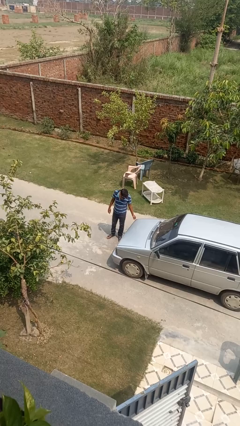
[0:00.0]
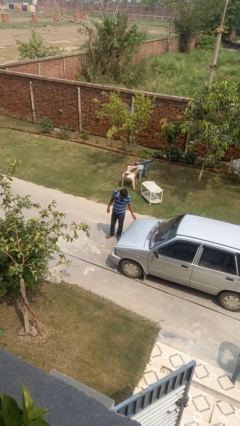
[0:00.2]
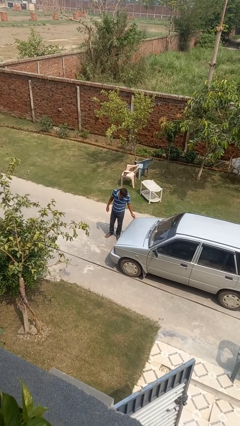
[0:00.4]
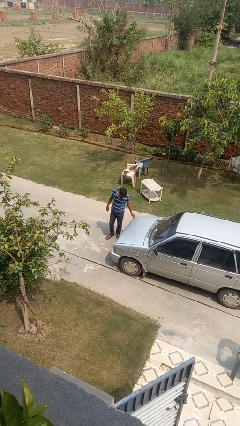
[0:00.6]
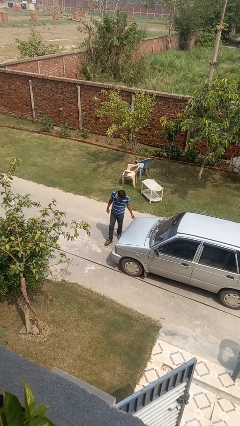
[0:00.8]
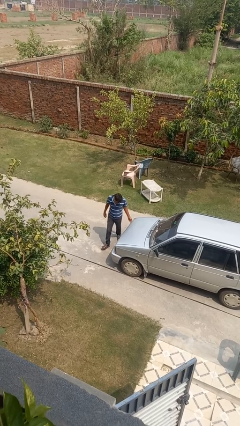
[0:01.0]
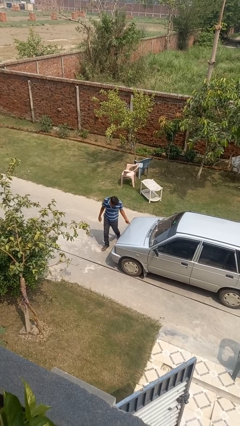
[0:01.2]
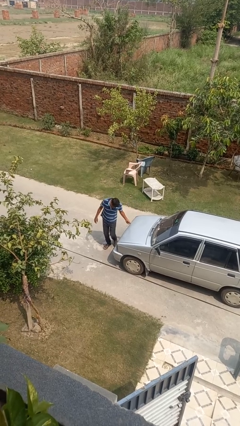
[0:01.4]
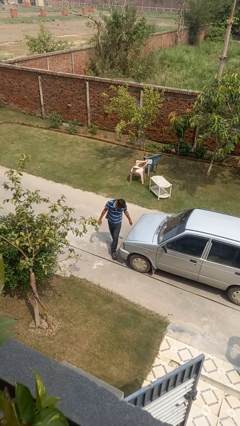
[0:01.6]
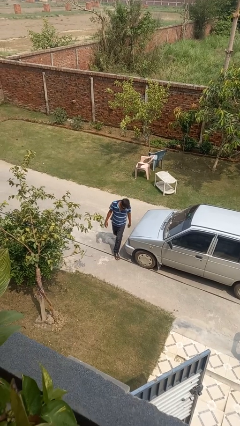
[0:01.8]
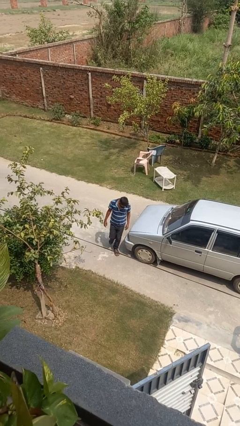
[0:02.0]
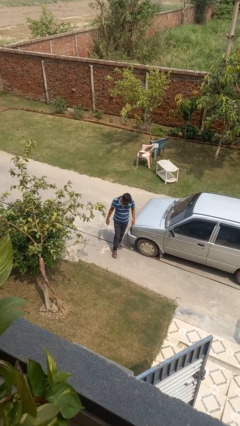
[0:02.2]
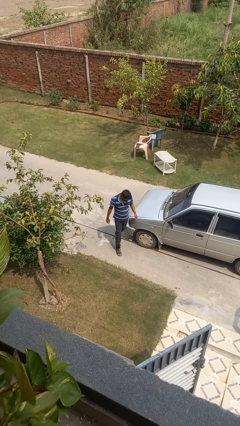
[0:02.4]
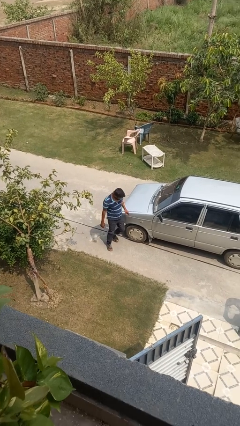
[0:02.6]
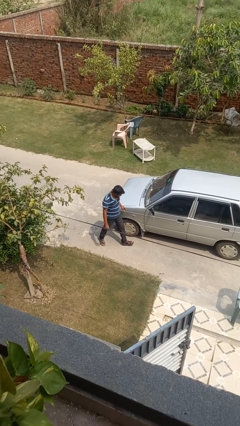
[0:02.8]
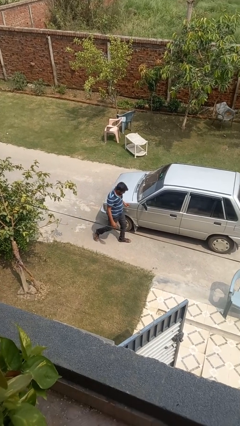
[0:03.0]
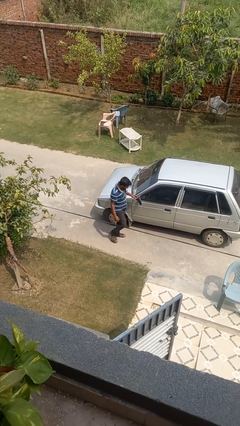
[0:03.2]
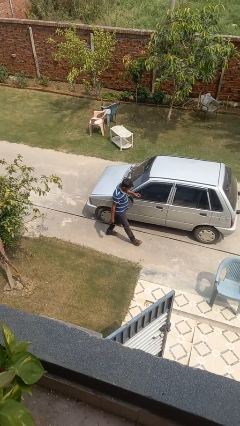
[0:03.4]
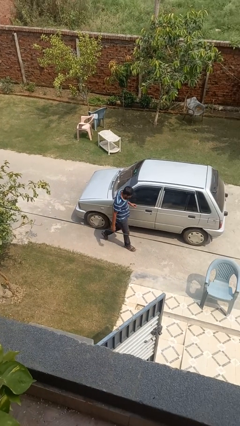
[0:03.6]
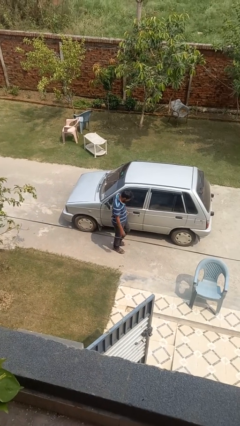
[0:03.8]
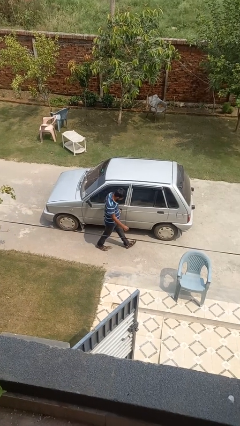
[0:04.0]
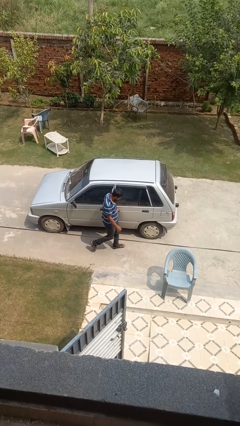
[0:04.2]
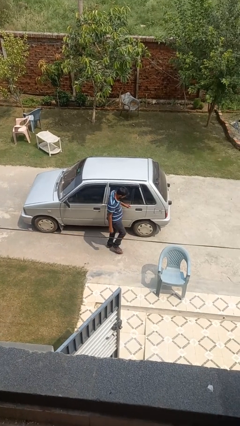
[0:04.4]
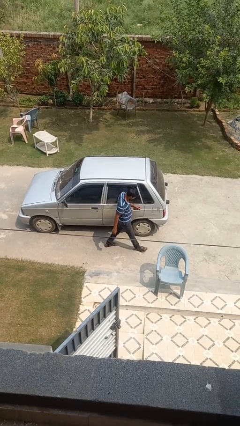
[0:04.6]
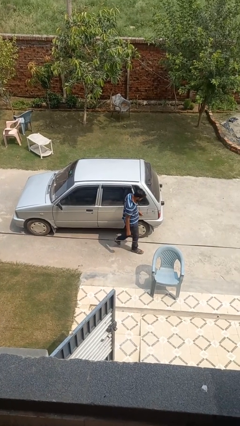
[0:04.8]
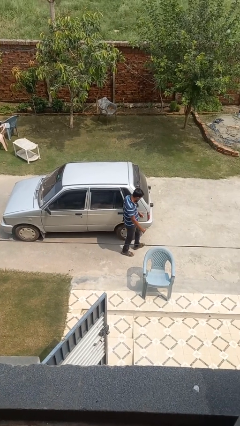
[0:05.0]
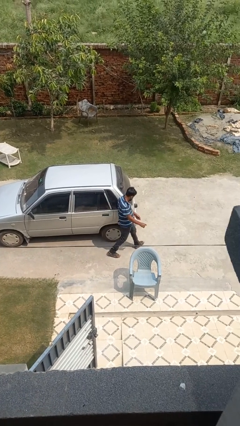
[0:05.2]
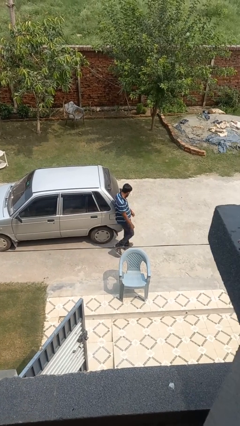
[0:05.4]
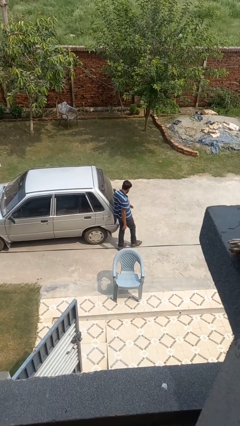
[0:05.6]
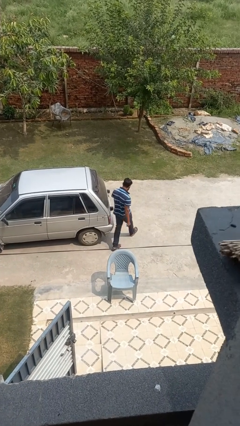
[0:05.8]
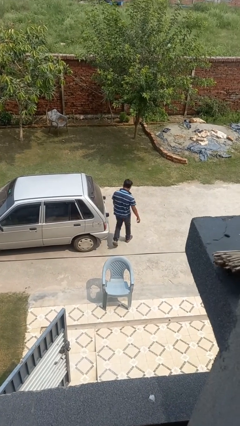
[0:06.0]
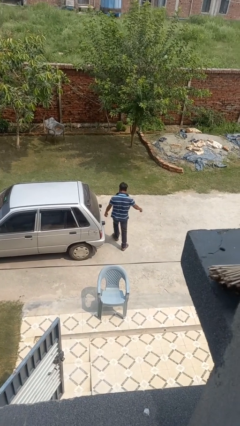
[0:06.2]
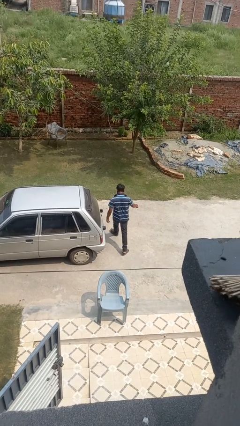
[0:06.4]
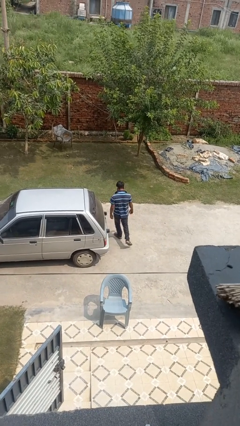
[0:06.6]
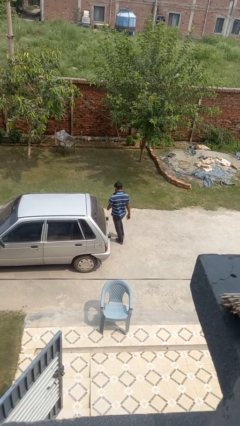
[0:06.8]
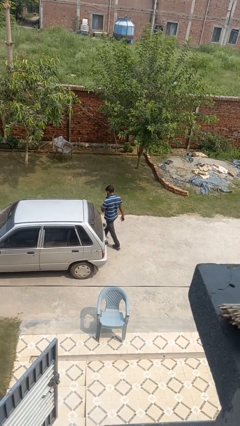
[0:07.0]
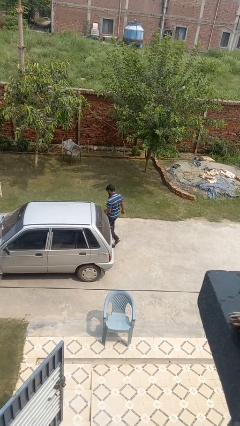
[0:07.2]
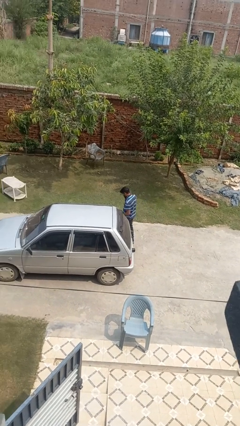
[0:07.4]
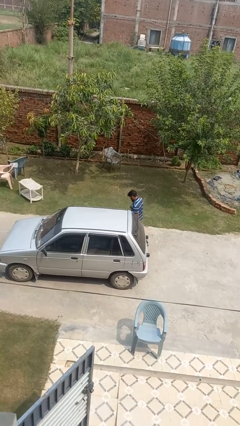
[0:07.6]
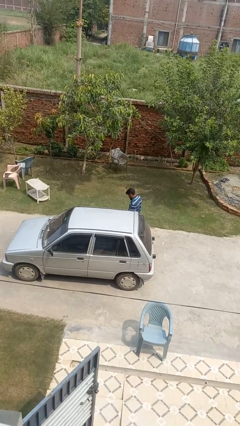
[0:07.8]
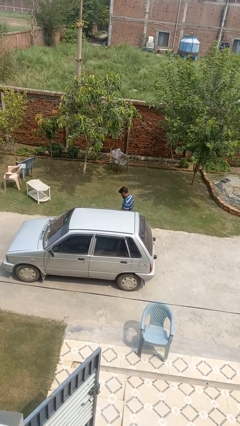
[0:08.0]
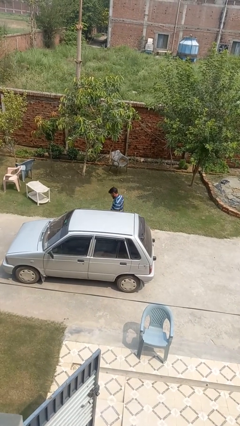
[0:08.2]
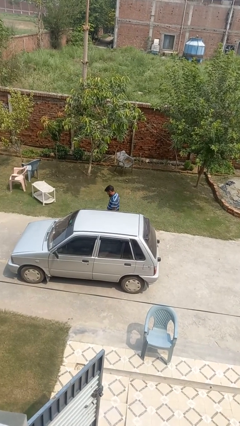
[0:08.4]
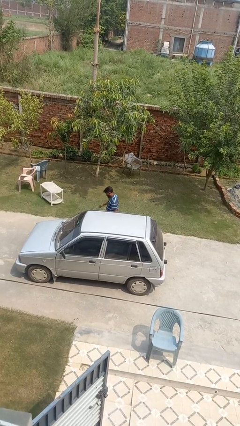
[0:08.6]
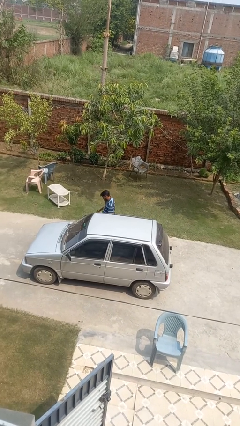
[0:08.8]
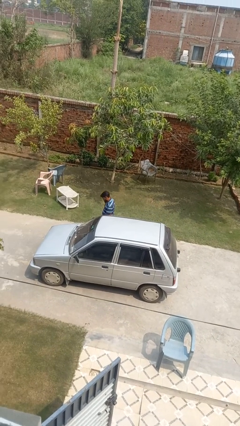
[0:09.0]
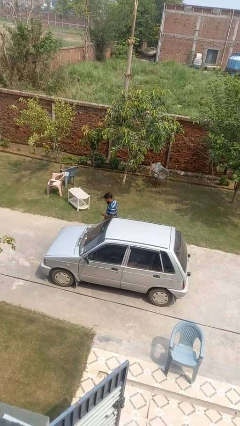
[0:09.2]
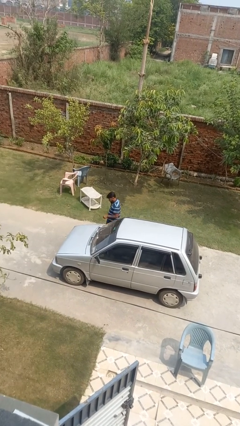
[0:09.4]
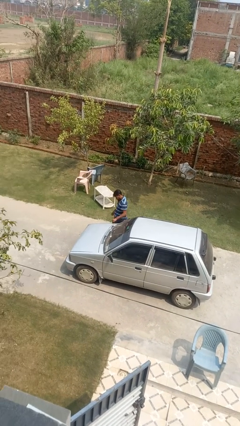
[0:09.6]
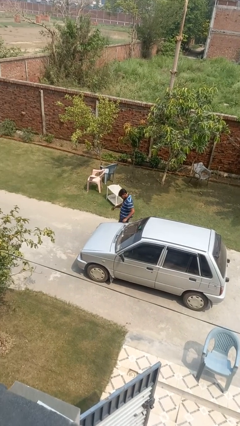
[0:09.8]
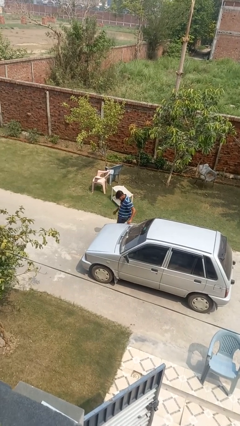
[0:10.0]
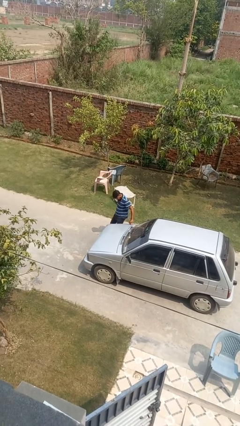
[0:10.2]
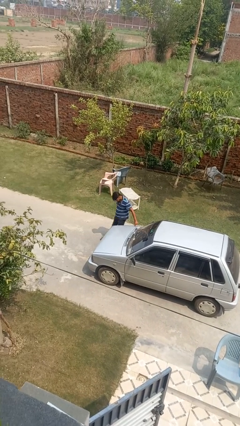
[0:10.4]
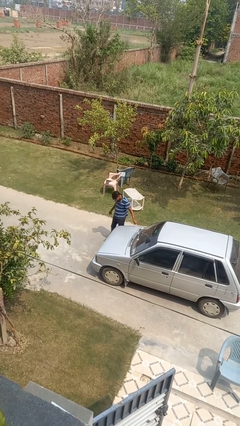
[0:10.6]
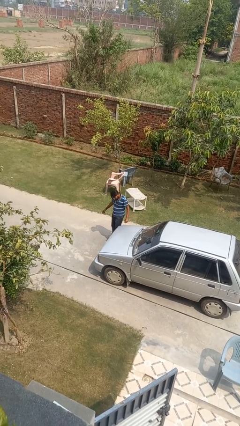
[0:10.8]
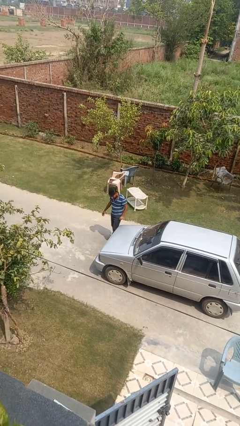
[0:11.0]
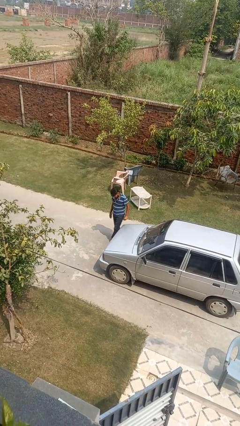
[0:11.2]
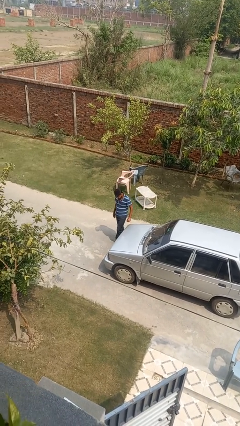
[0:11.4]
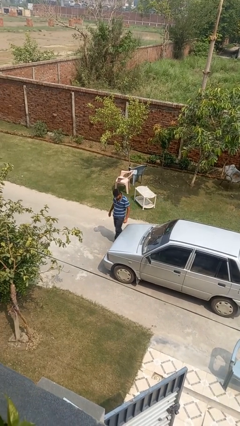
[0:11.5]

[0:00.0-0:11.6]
person walks around car

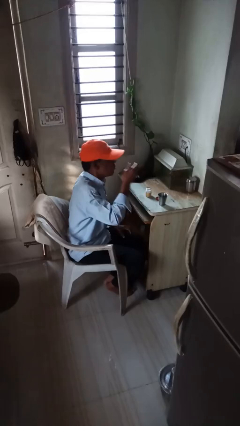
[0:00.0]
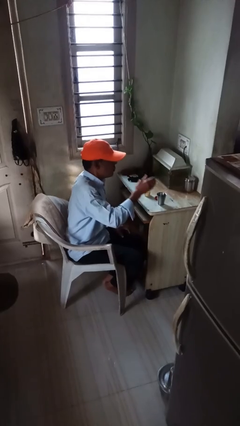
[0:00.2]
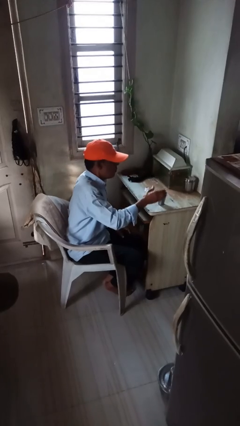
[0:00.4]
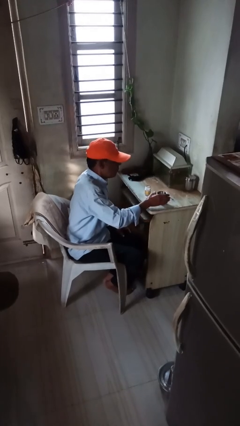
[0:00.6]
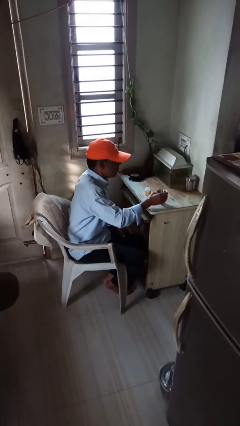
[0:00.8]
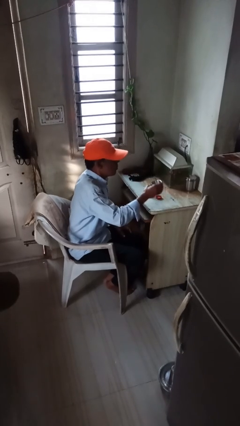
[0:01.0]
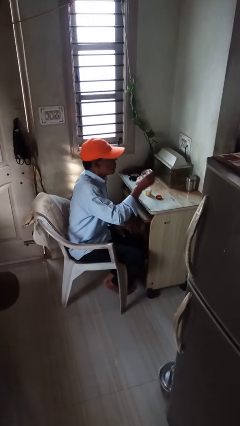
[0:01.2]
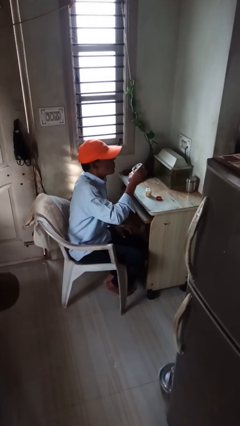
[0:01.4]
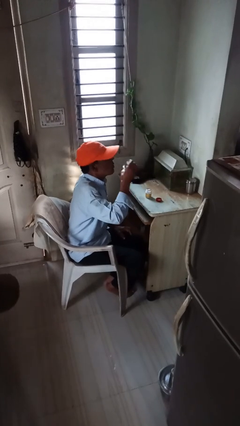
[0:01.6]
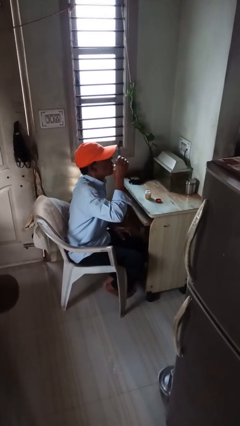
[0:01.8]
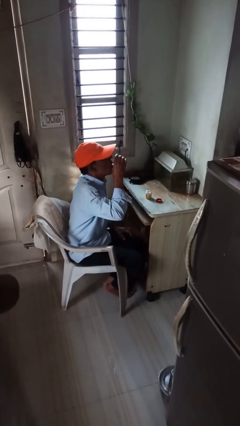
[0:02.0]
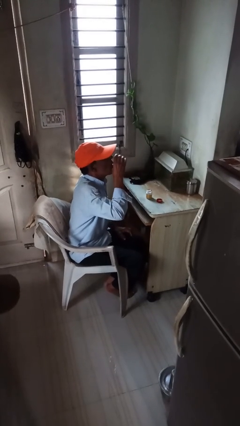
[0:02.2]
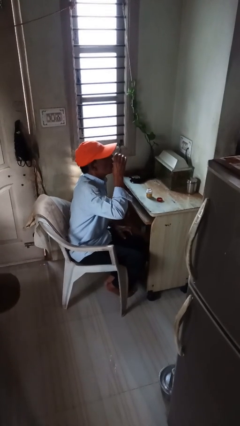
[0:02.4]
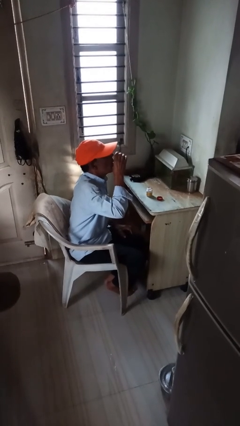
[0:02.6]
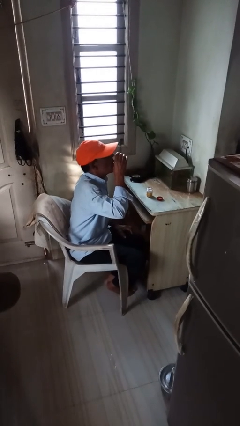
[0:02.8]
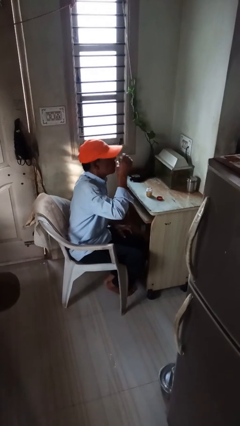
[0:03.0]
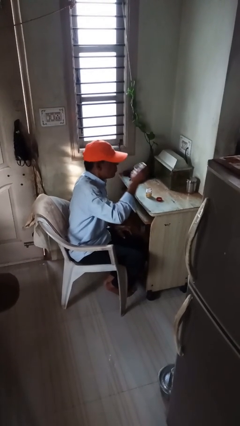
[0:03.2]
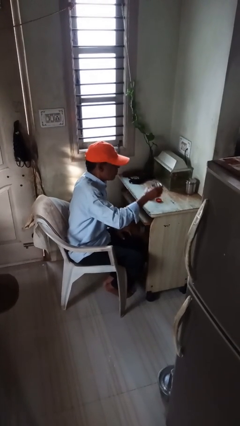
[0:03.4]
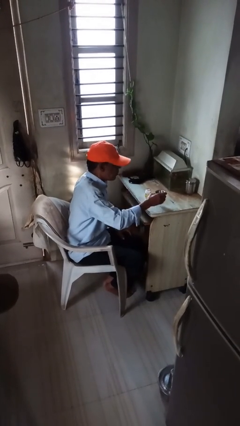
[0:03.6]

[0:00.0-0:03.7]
person drinks from cup

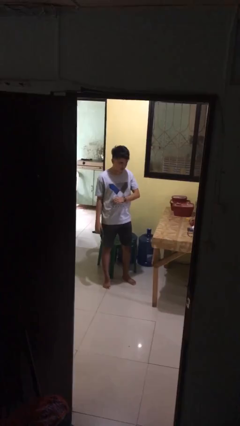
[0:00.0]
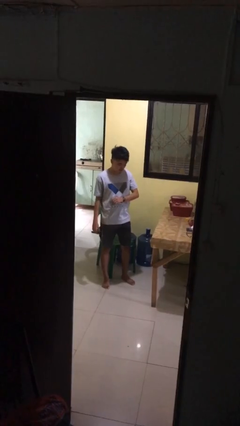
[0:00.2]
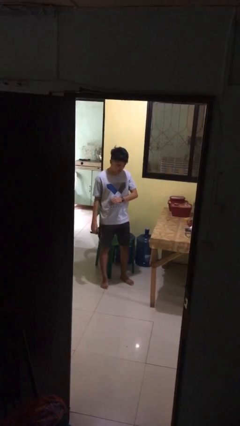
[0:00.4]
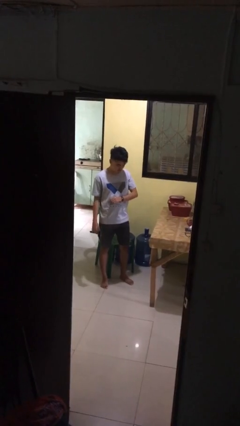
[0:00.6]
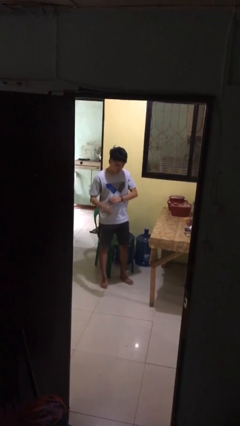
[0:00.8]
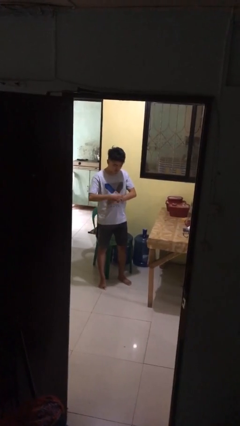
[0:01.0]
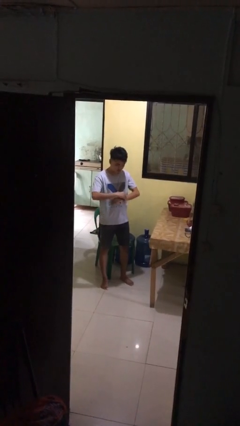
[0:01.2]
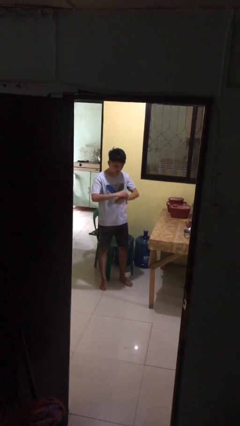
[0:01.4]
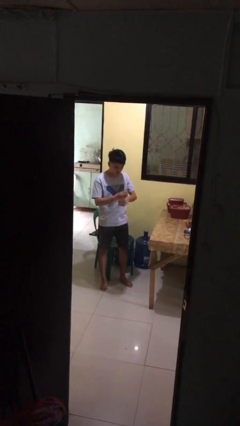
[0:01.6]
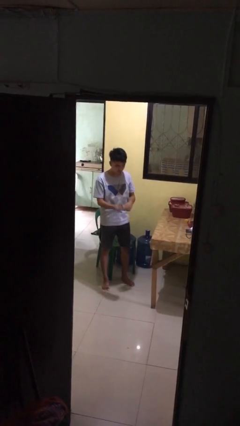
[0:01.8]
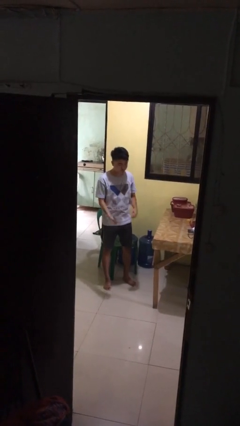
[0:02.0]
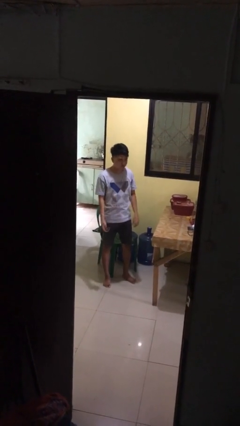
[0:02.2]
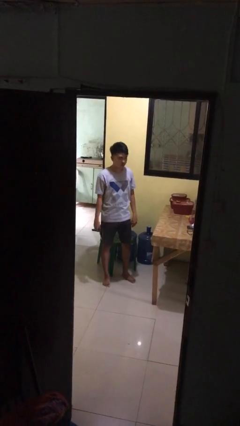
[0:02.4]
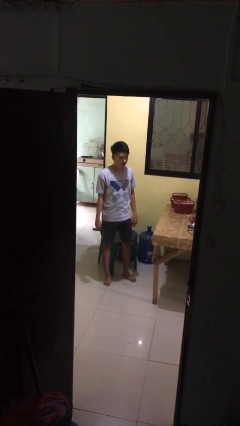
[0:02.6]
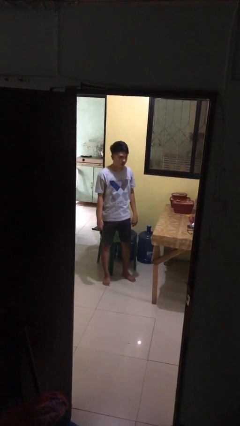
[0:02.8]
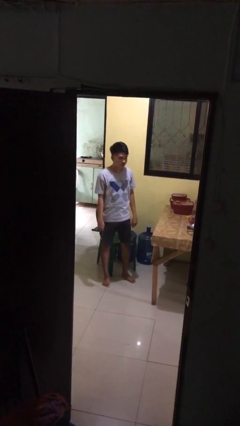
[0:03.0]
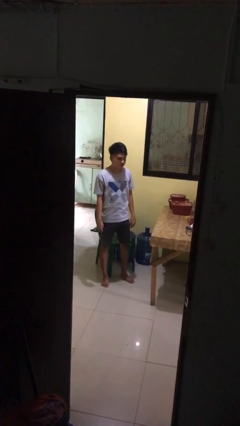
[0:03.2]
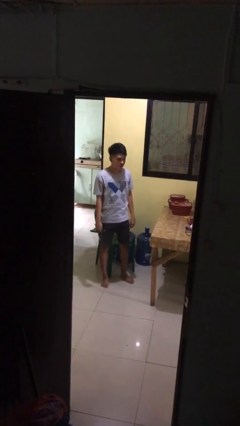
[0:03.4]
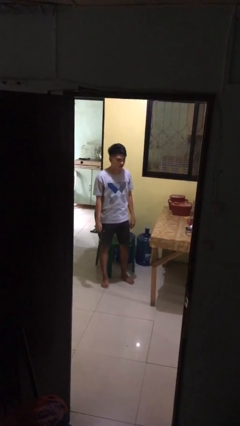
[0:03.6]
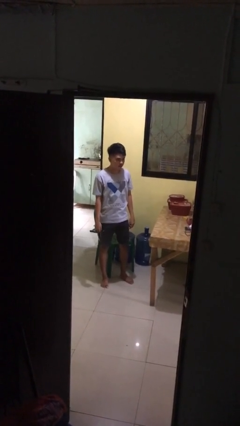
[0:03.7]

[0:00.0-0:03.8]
person takes off wristwatch
